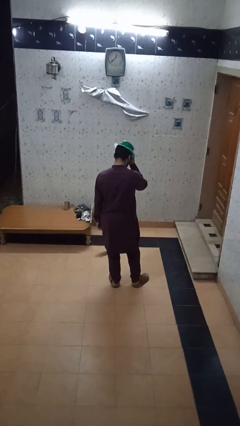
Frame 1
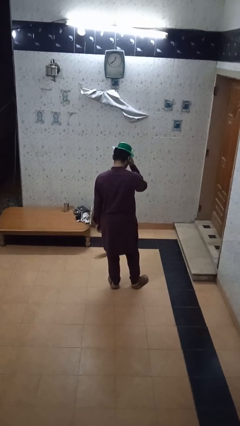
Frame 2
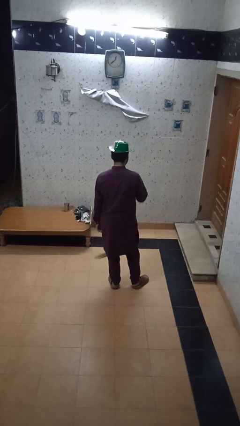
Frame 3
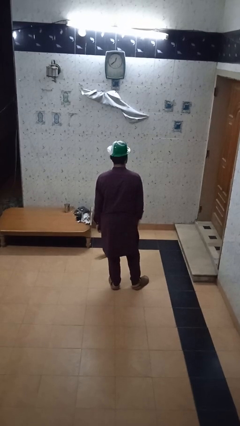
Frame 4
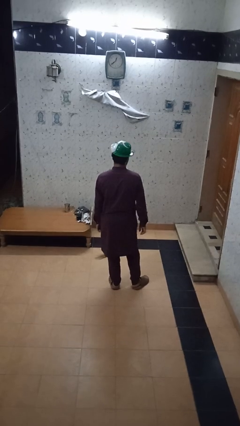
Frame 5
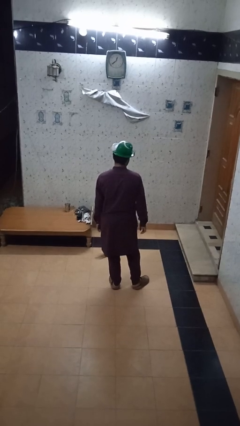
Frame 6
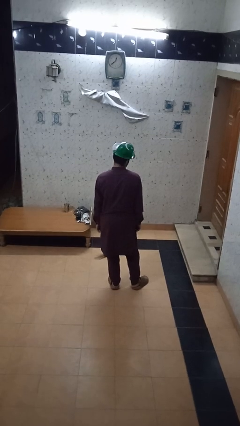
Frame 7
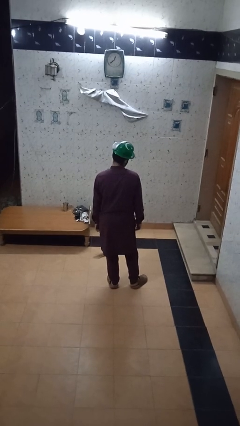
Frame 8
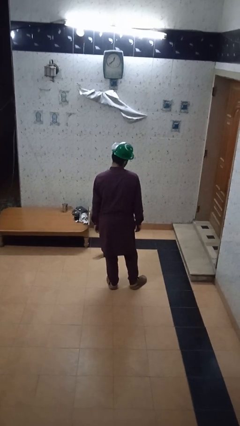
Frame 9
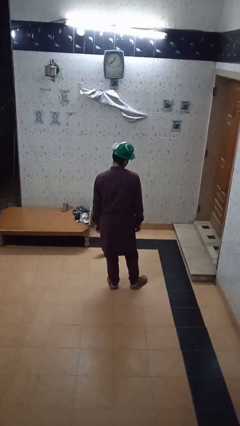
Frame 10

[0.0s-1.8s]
person puts on hat

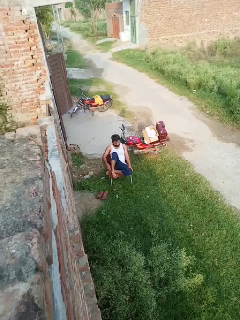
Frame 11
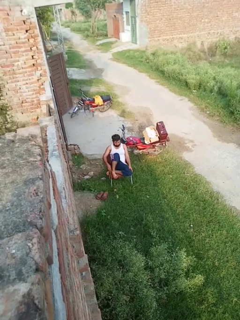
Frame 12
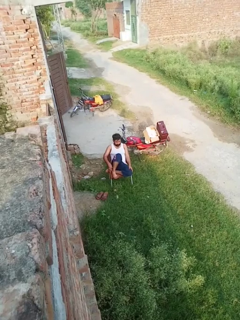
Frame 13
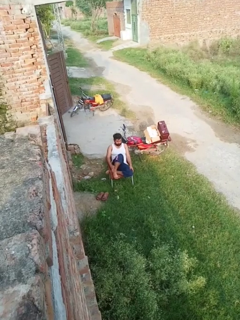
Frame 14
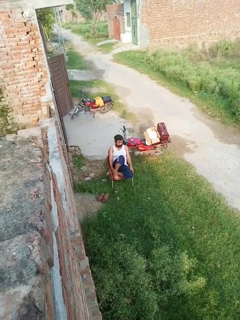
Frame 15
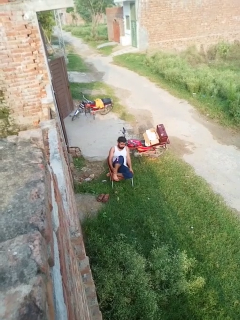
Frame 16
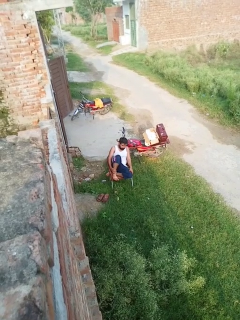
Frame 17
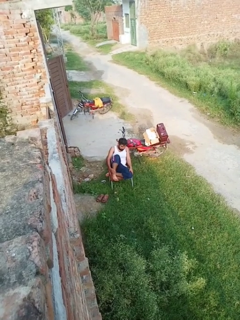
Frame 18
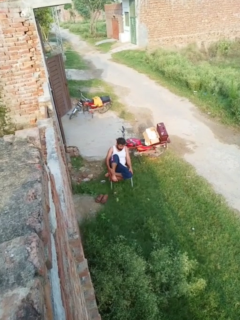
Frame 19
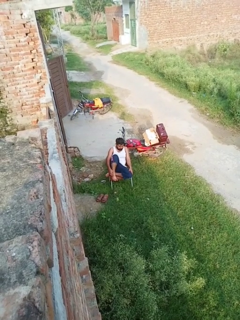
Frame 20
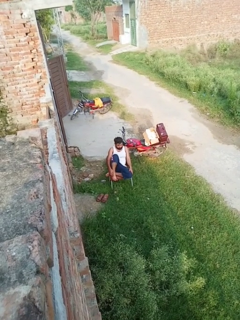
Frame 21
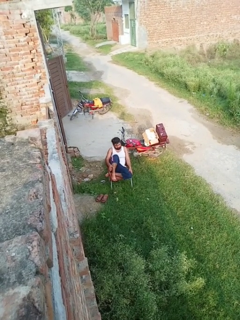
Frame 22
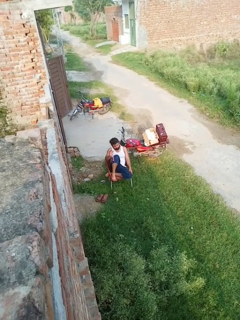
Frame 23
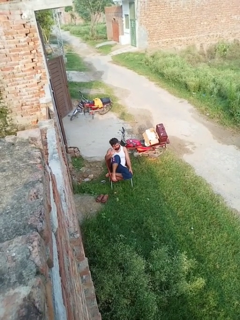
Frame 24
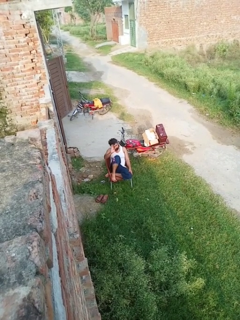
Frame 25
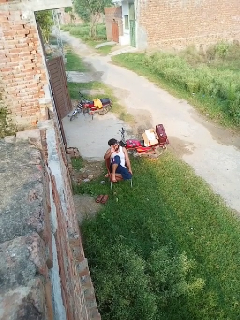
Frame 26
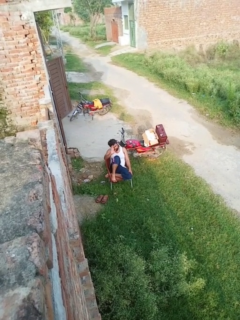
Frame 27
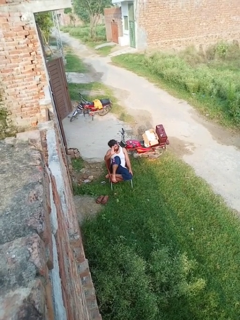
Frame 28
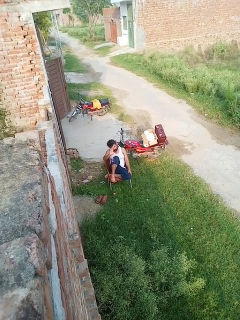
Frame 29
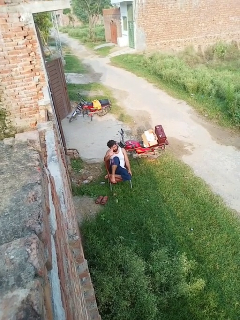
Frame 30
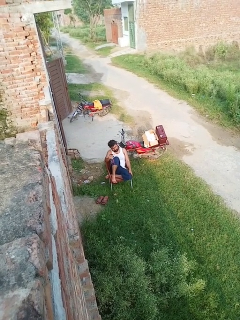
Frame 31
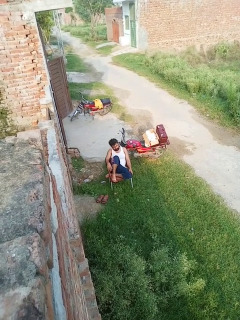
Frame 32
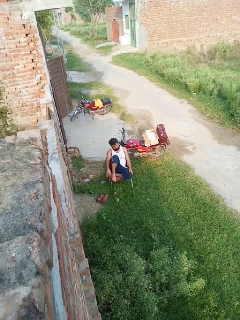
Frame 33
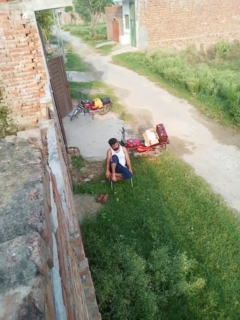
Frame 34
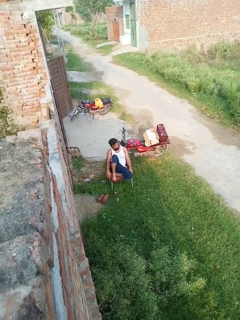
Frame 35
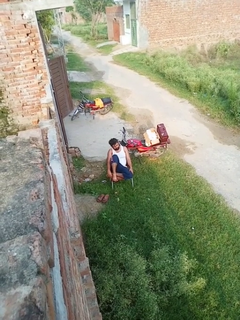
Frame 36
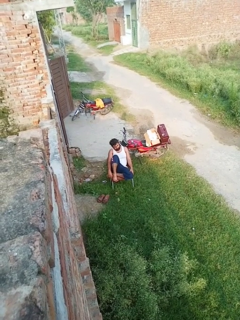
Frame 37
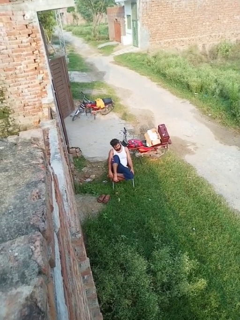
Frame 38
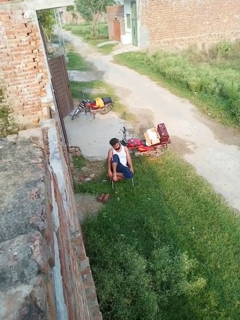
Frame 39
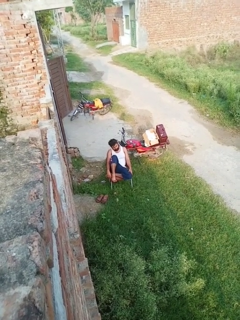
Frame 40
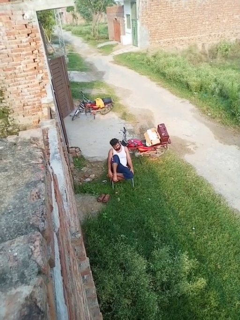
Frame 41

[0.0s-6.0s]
person waves at person

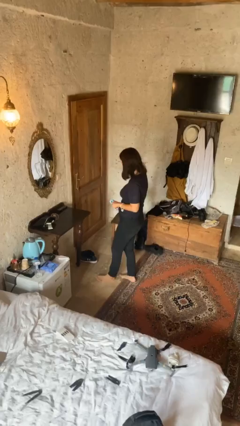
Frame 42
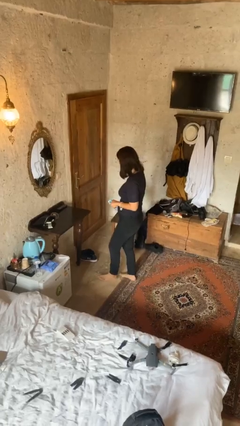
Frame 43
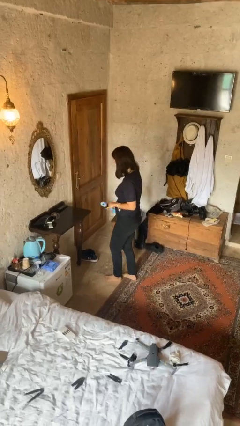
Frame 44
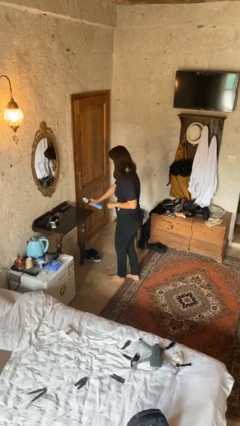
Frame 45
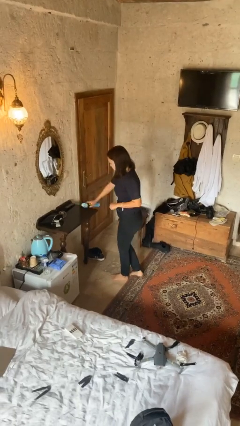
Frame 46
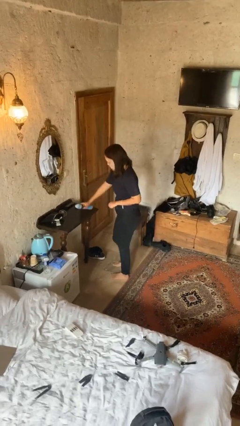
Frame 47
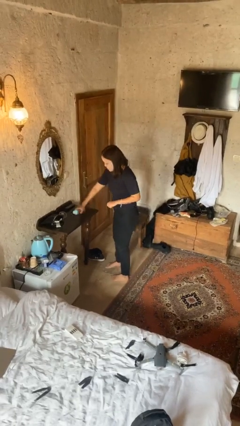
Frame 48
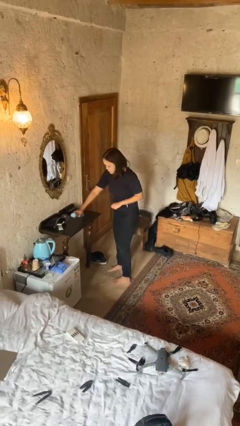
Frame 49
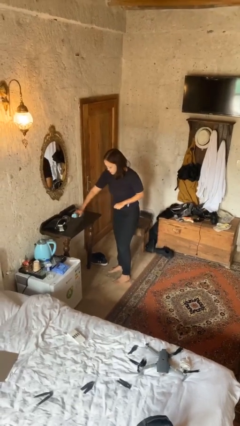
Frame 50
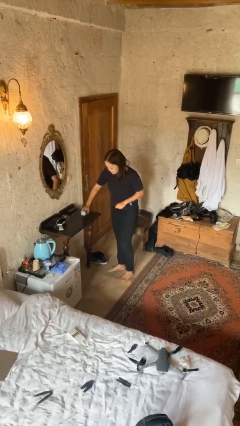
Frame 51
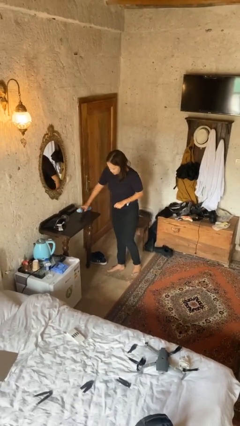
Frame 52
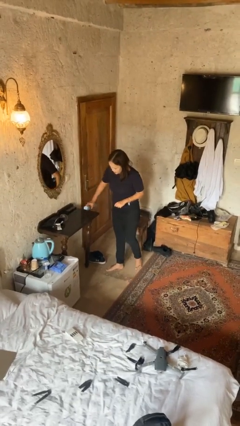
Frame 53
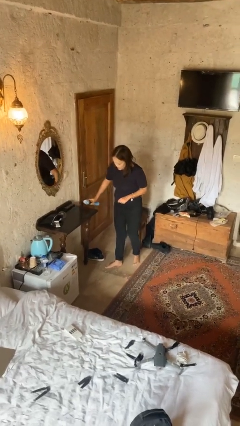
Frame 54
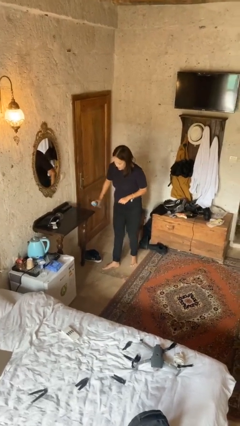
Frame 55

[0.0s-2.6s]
person sprays from bottle

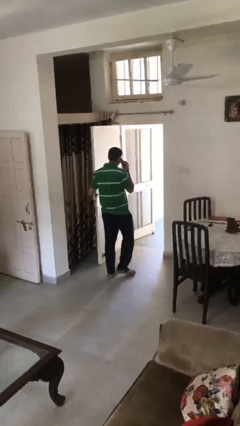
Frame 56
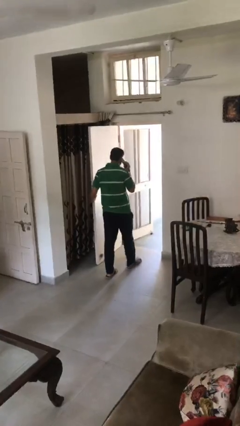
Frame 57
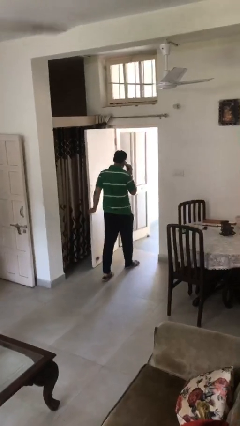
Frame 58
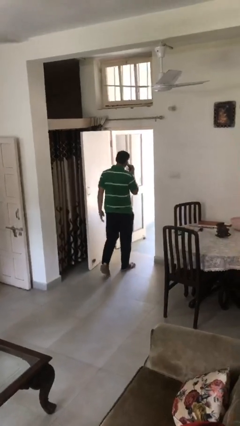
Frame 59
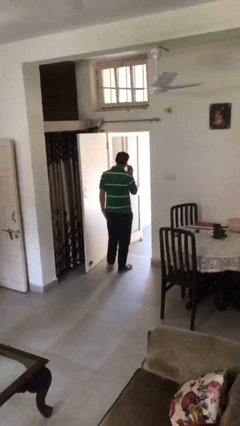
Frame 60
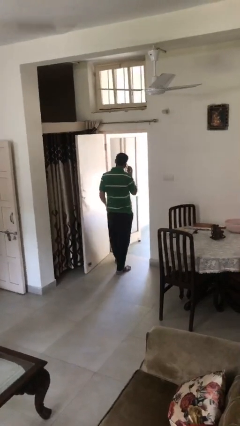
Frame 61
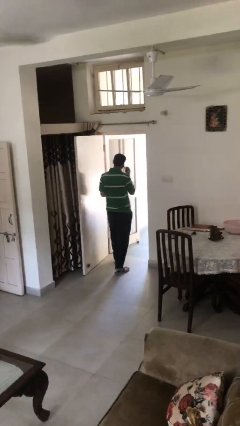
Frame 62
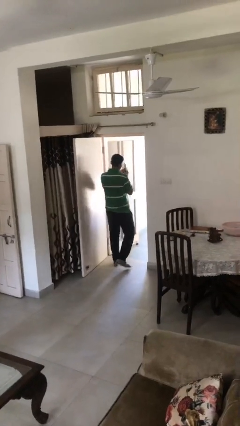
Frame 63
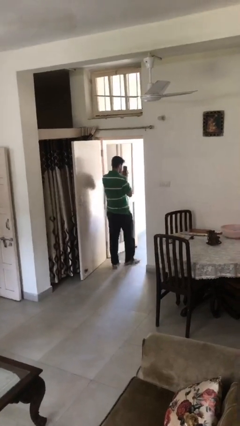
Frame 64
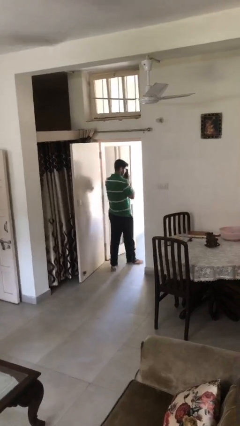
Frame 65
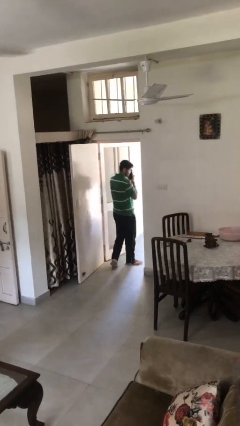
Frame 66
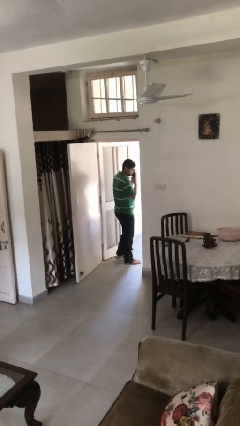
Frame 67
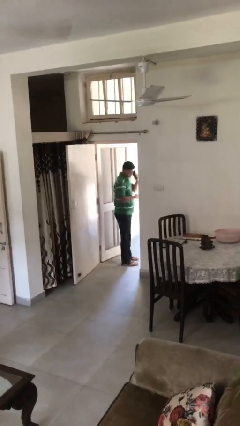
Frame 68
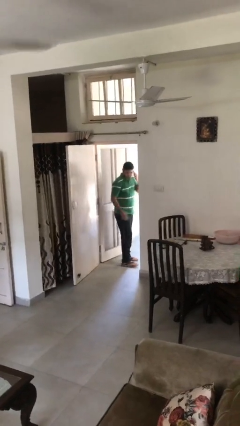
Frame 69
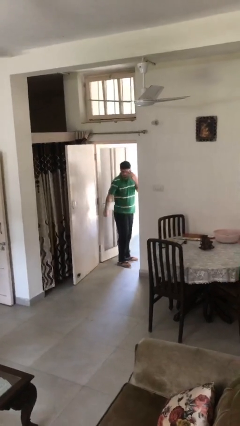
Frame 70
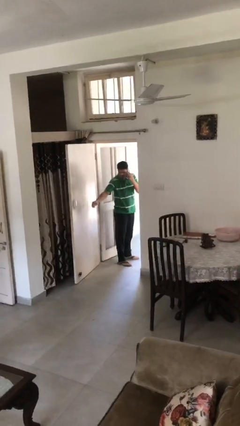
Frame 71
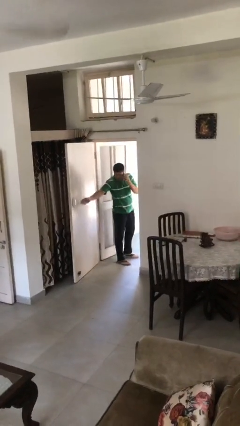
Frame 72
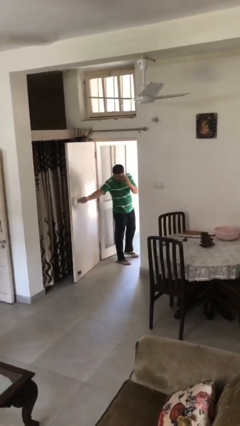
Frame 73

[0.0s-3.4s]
person exits scene through structure

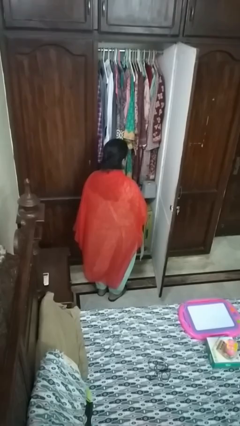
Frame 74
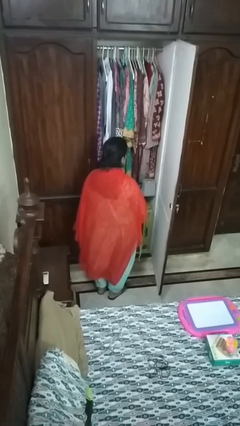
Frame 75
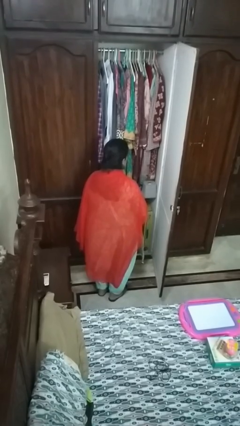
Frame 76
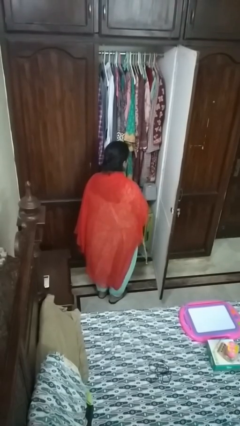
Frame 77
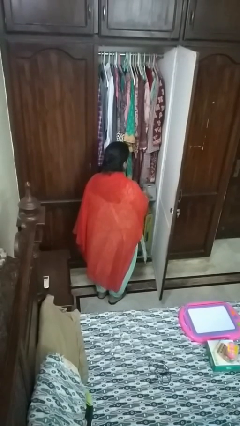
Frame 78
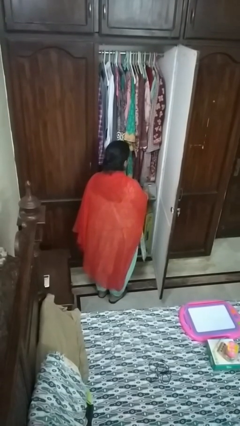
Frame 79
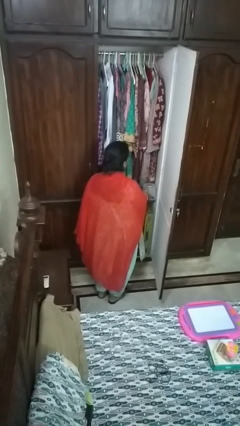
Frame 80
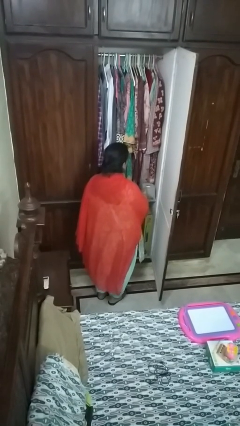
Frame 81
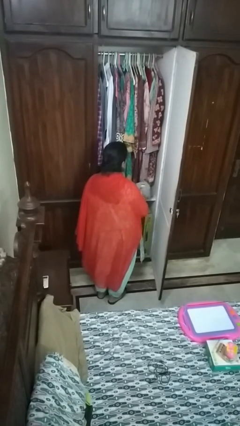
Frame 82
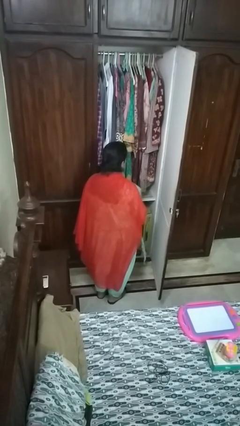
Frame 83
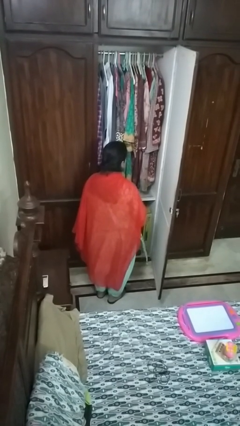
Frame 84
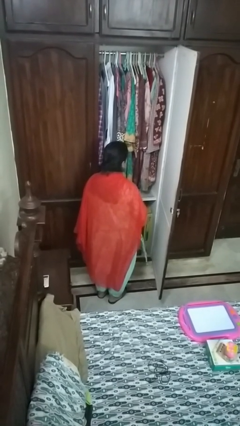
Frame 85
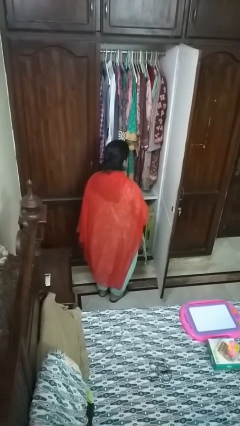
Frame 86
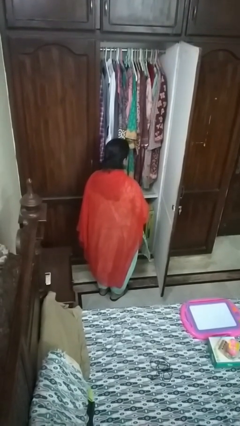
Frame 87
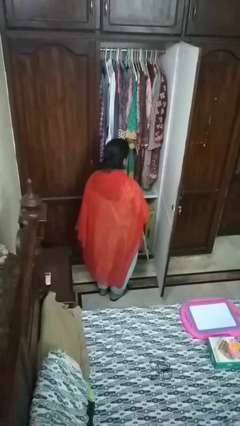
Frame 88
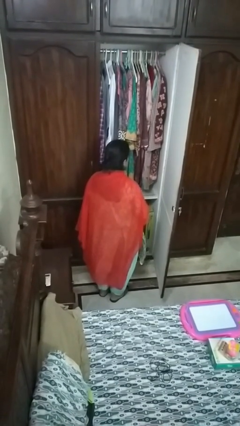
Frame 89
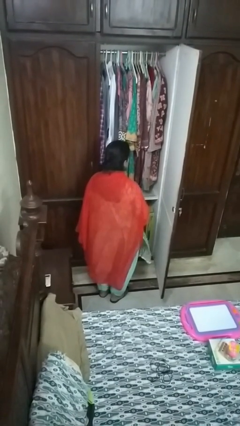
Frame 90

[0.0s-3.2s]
person picks up object from cabinet

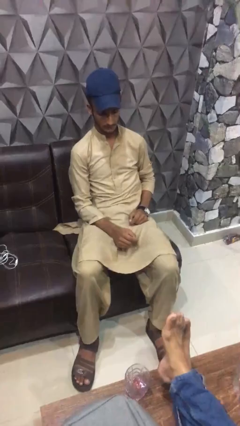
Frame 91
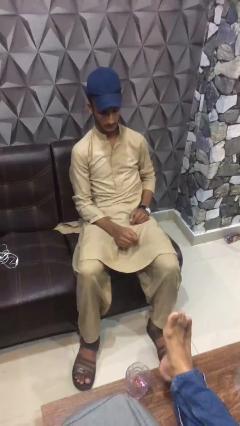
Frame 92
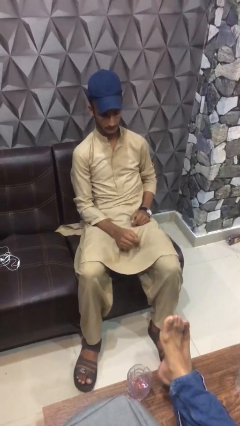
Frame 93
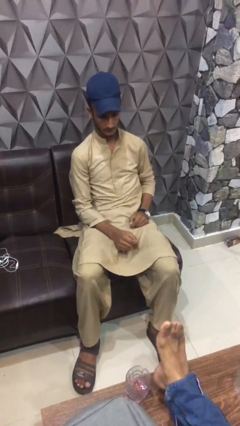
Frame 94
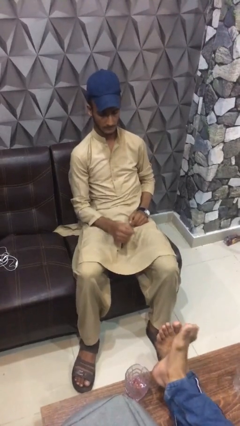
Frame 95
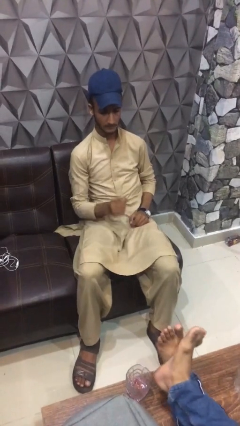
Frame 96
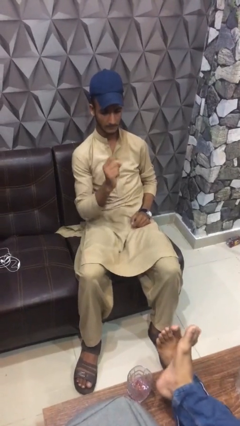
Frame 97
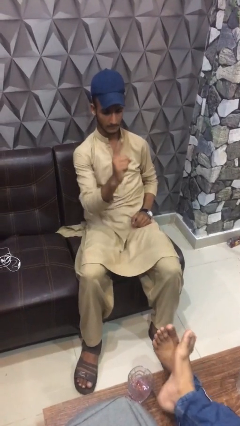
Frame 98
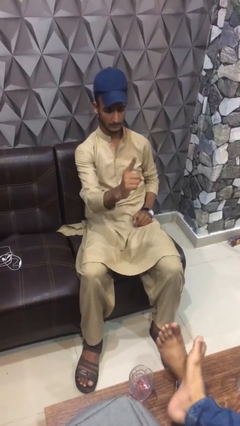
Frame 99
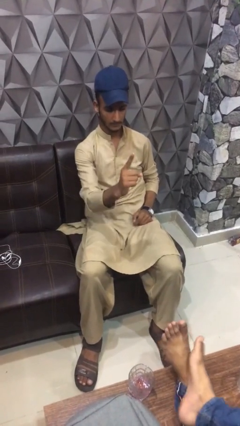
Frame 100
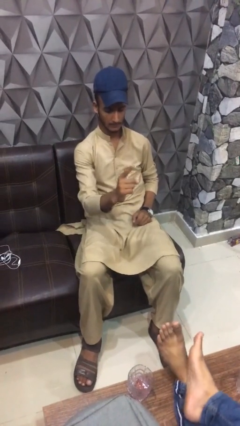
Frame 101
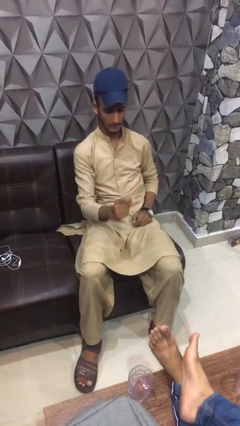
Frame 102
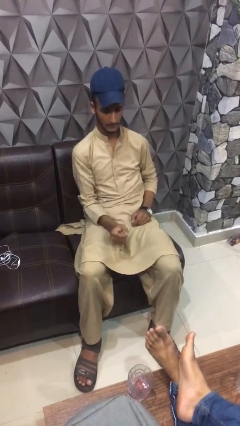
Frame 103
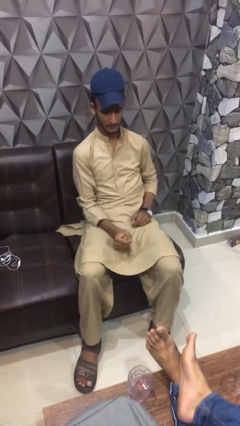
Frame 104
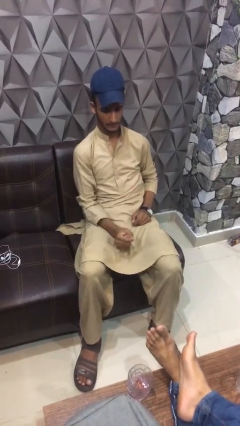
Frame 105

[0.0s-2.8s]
person gestures number one
